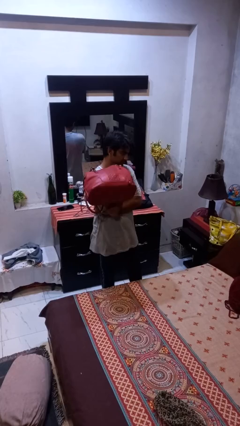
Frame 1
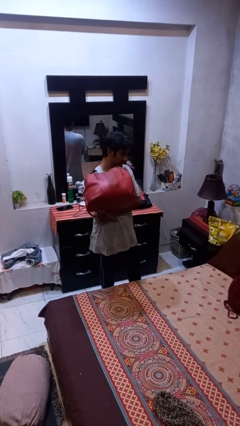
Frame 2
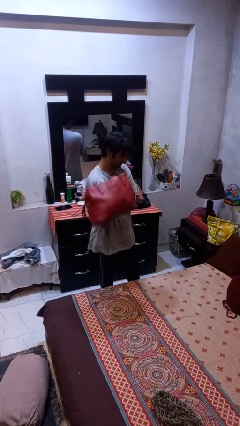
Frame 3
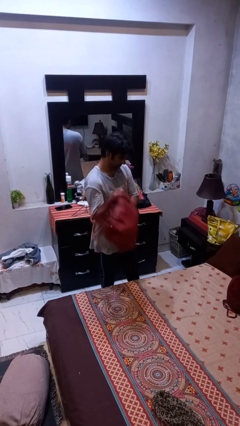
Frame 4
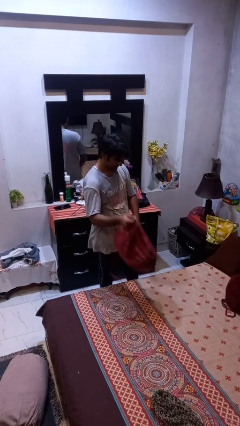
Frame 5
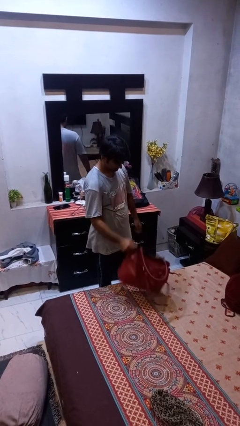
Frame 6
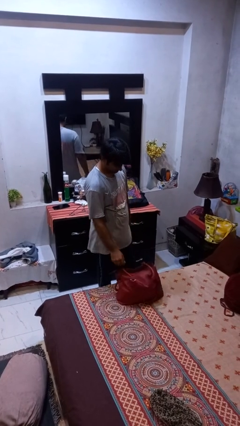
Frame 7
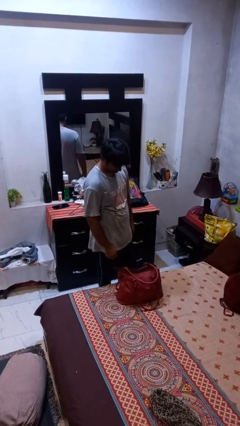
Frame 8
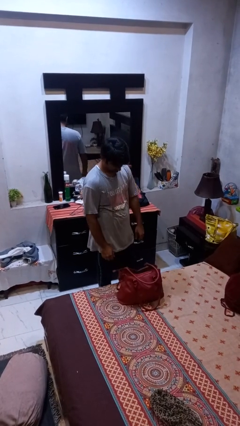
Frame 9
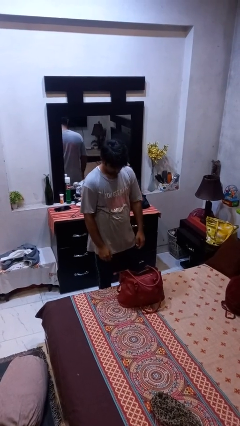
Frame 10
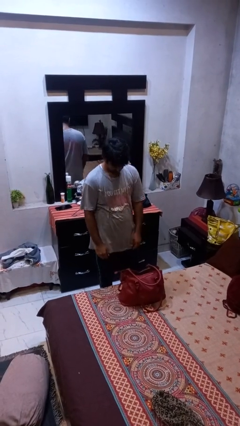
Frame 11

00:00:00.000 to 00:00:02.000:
person puts down object on bed

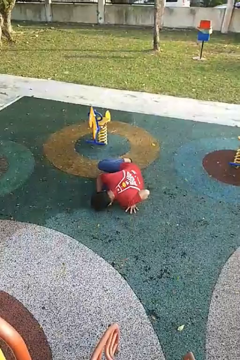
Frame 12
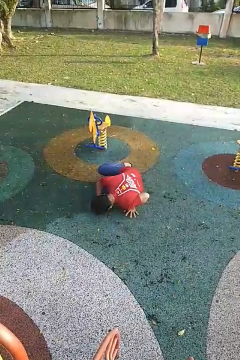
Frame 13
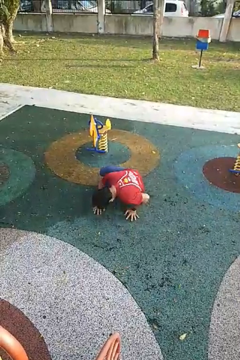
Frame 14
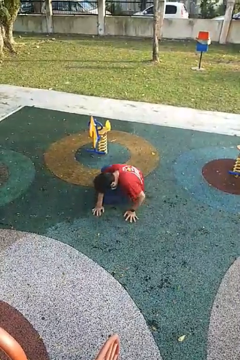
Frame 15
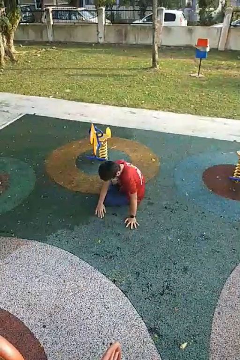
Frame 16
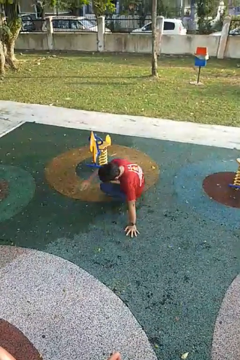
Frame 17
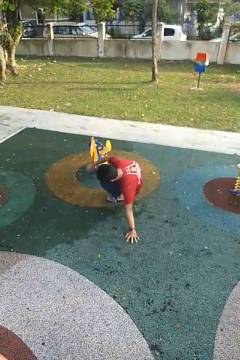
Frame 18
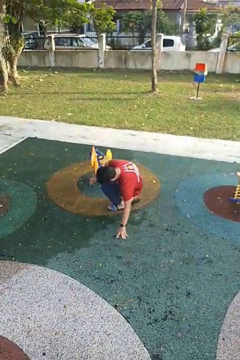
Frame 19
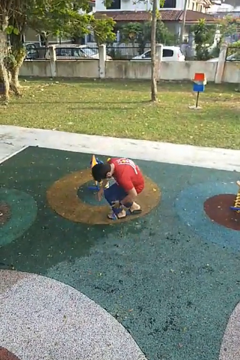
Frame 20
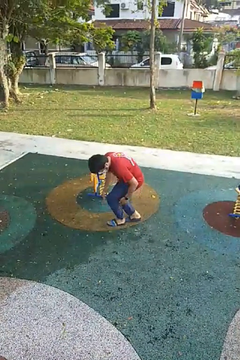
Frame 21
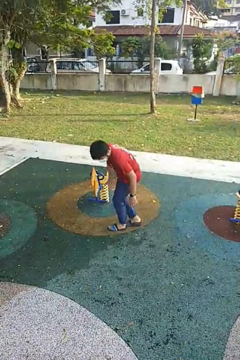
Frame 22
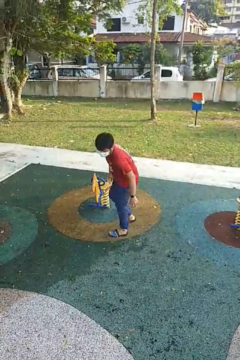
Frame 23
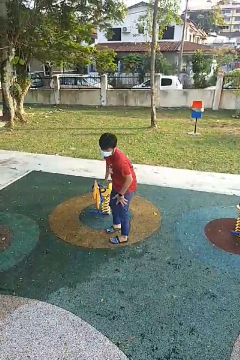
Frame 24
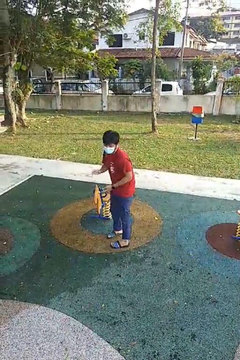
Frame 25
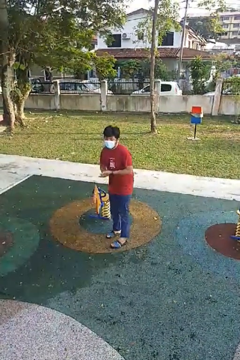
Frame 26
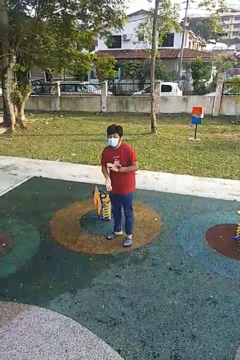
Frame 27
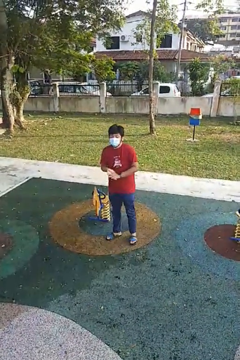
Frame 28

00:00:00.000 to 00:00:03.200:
person stands up from floor

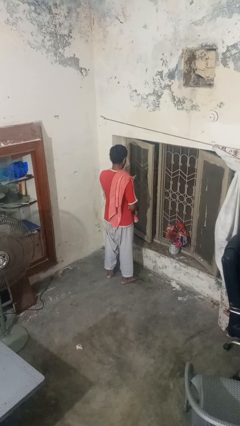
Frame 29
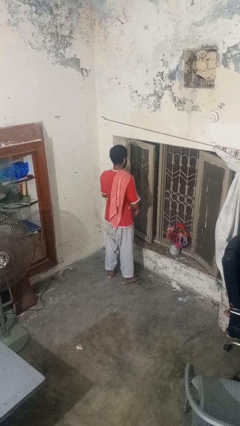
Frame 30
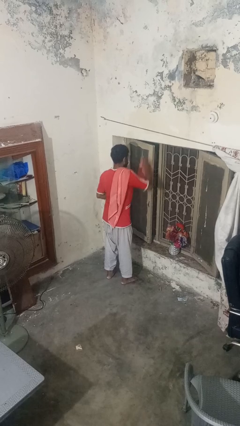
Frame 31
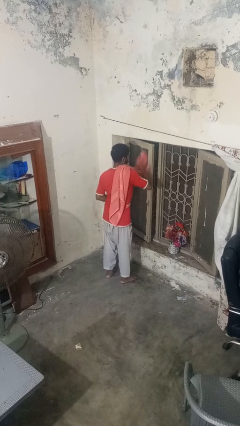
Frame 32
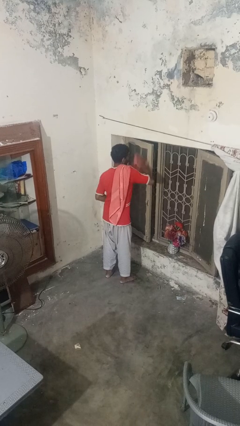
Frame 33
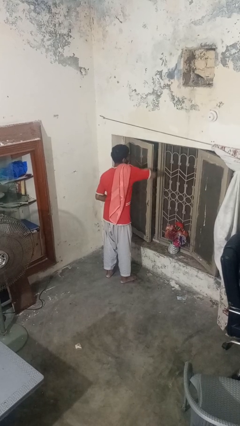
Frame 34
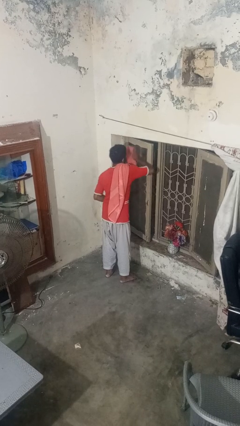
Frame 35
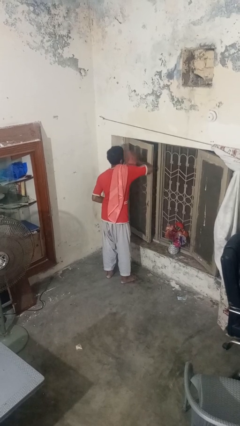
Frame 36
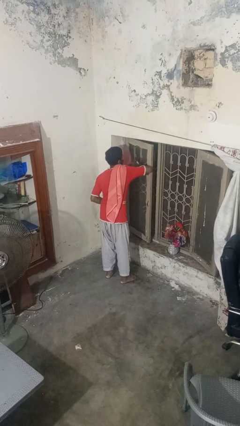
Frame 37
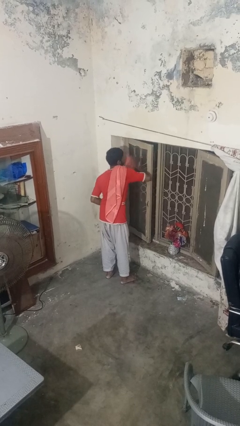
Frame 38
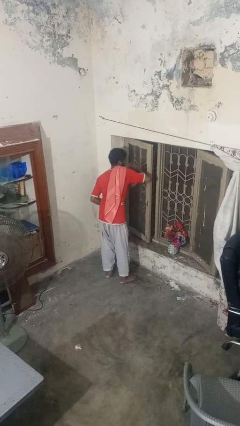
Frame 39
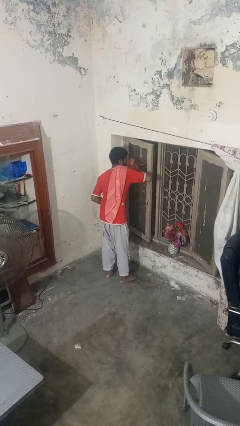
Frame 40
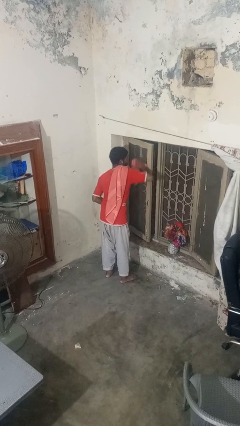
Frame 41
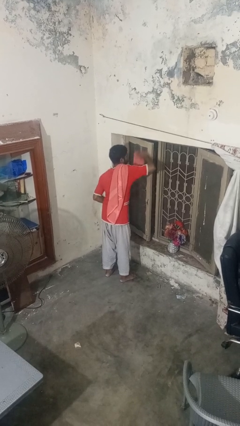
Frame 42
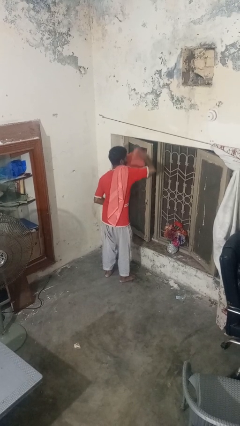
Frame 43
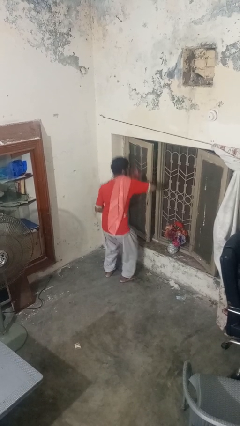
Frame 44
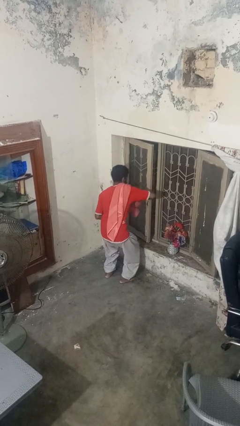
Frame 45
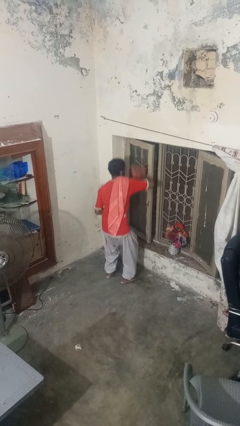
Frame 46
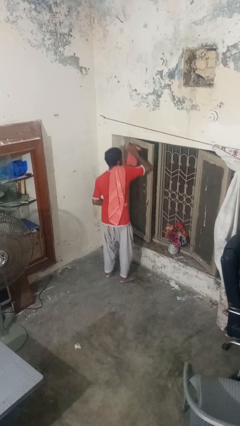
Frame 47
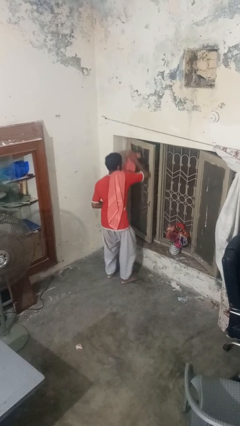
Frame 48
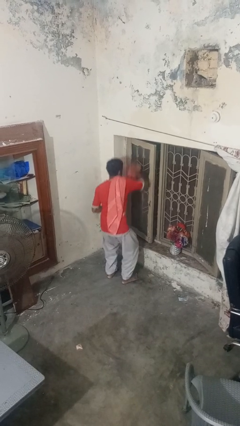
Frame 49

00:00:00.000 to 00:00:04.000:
person washes window

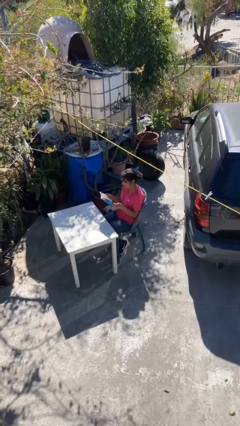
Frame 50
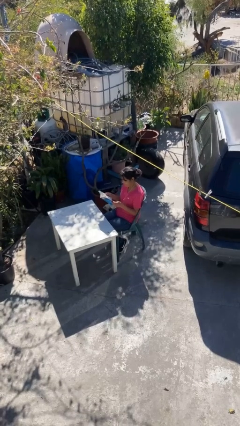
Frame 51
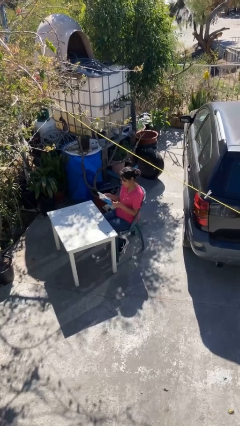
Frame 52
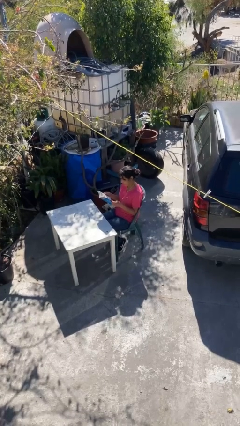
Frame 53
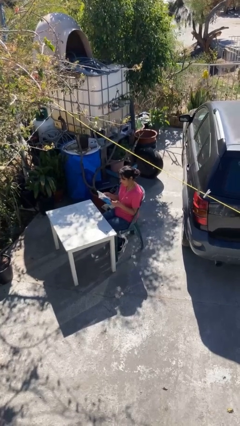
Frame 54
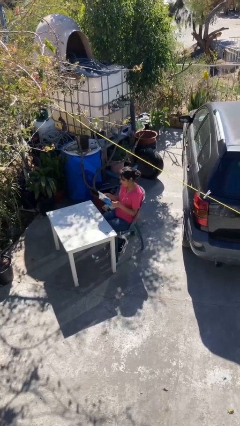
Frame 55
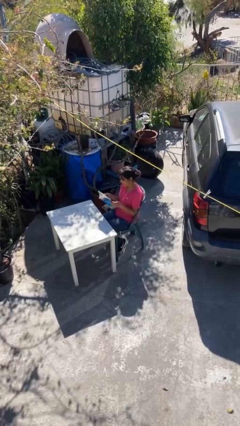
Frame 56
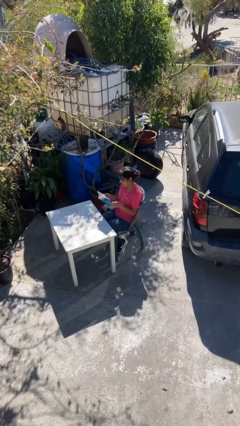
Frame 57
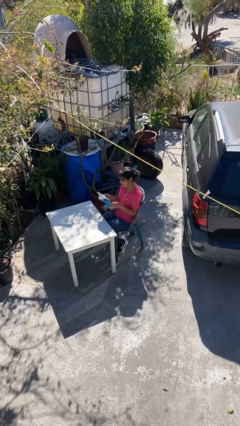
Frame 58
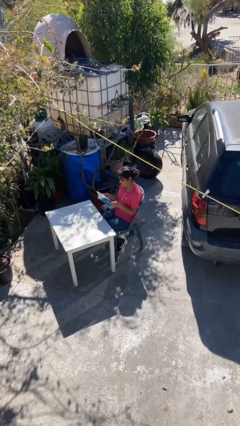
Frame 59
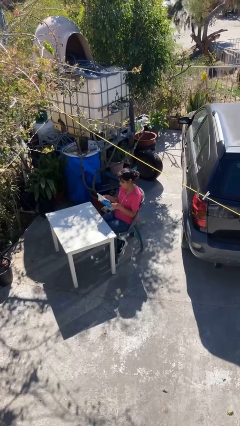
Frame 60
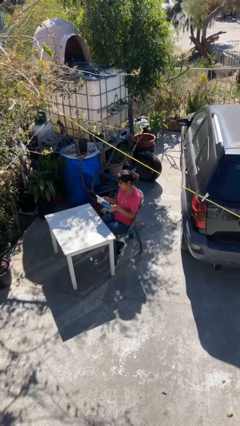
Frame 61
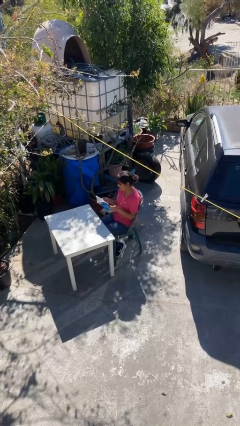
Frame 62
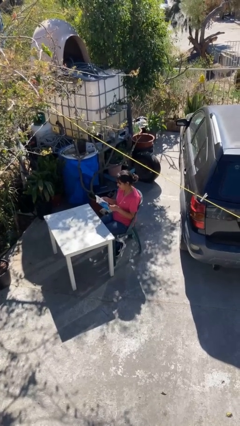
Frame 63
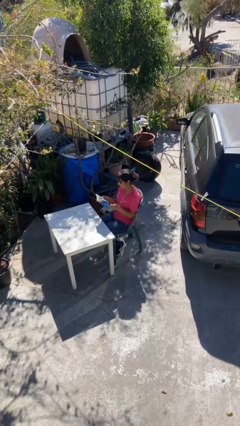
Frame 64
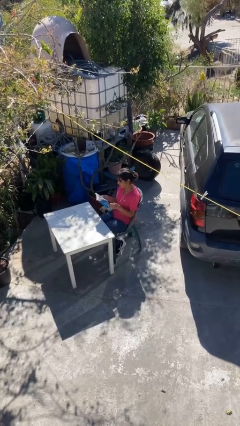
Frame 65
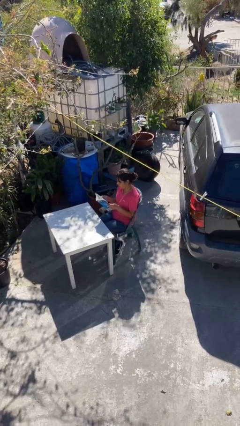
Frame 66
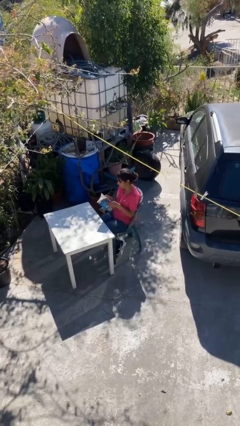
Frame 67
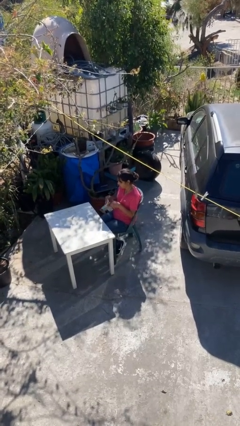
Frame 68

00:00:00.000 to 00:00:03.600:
person reads document

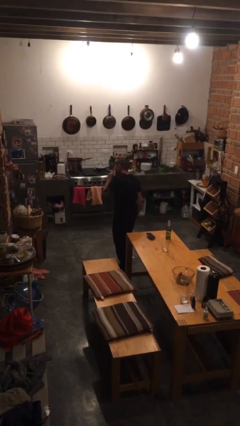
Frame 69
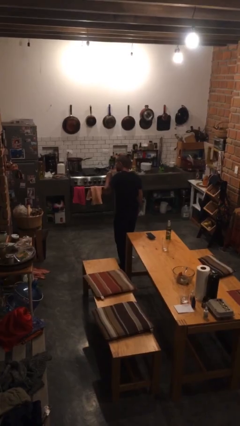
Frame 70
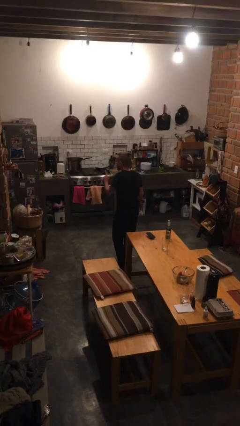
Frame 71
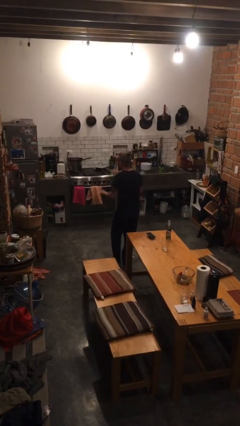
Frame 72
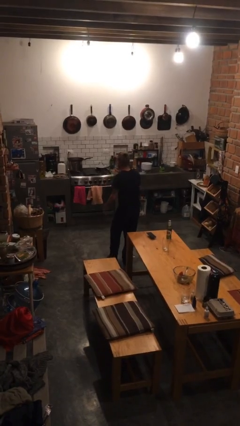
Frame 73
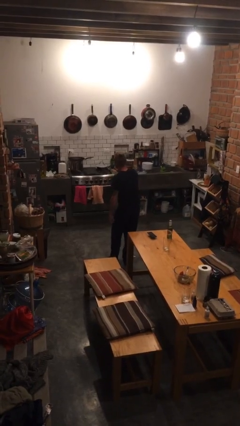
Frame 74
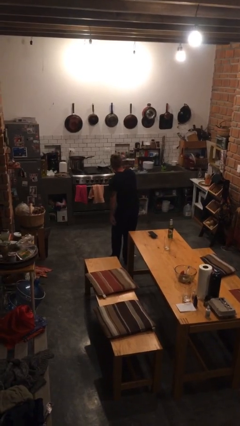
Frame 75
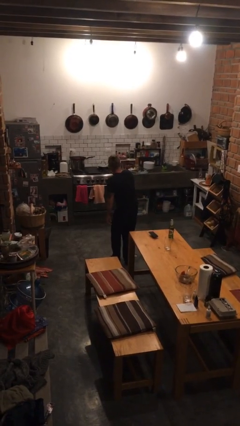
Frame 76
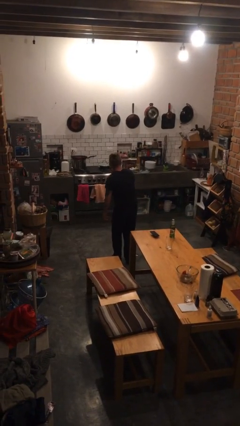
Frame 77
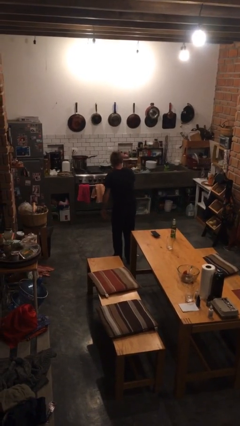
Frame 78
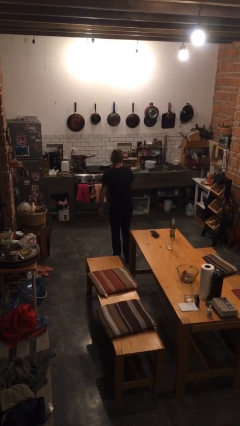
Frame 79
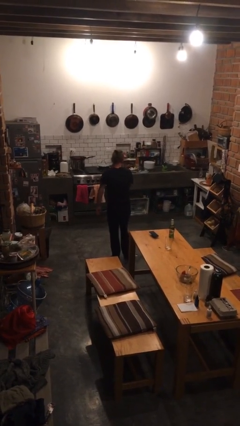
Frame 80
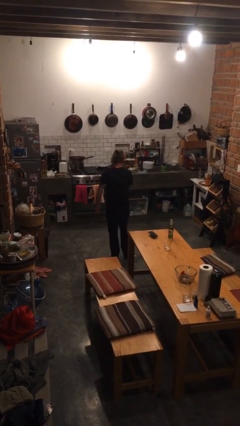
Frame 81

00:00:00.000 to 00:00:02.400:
person gestures be quiet

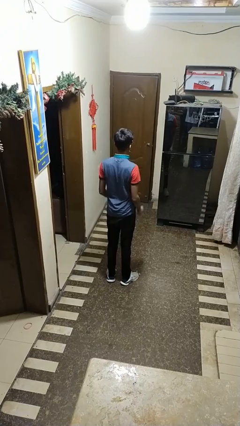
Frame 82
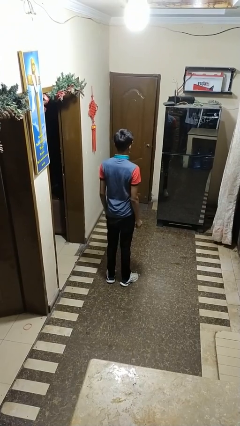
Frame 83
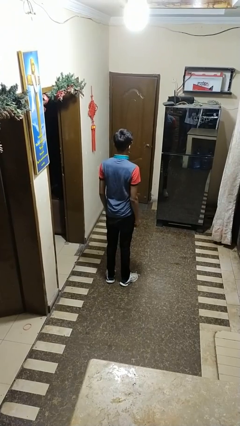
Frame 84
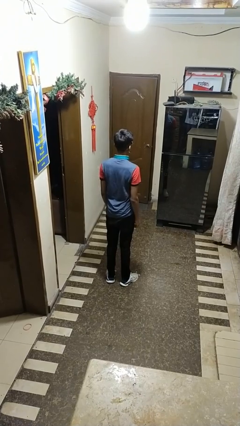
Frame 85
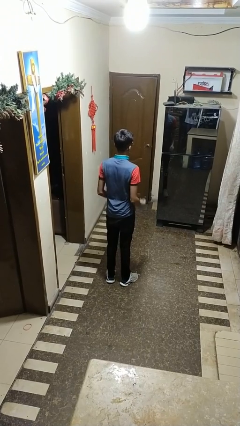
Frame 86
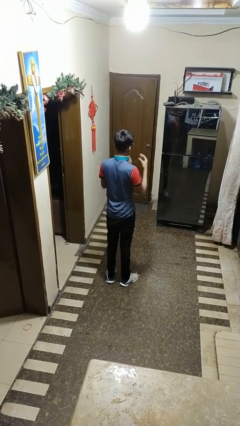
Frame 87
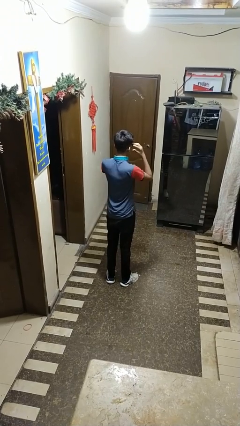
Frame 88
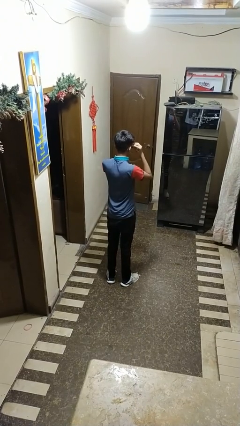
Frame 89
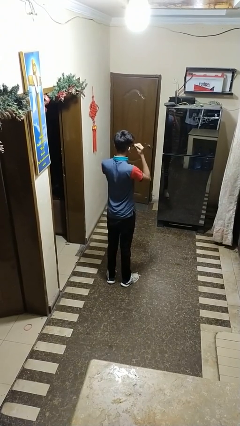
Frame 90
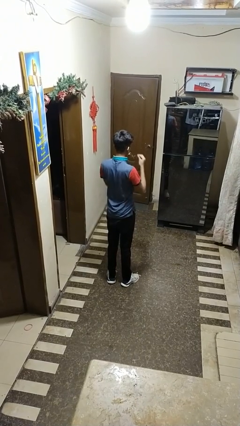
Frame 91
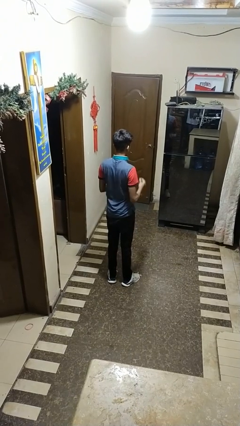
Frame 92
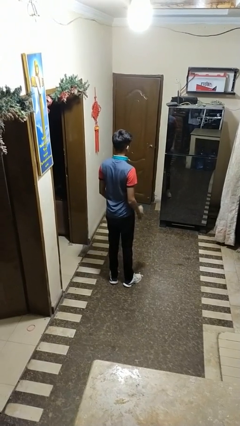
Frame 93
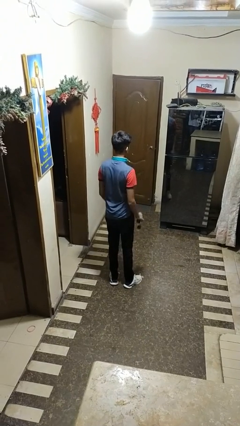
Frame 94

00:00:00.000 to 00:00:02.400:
person takes off sunglasses

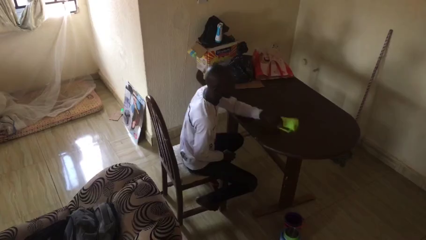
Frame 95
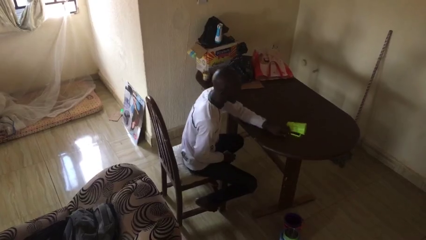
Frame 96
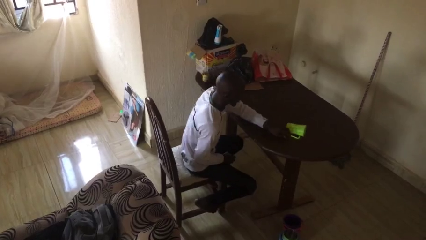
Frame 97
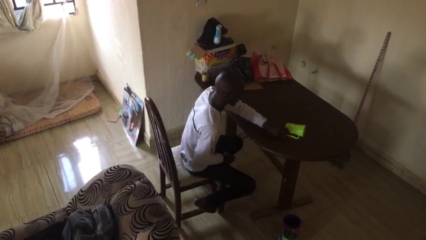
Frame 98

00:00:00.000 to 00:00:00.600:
person knocks over glass
